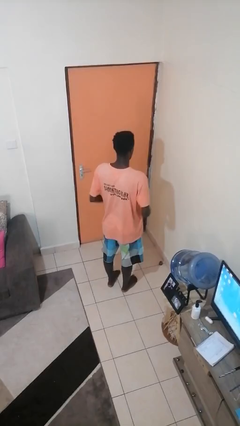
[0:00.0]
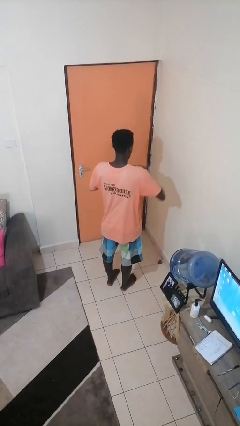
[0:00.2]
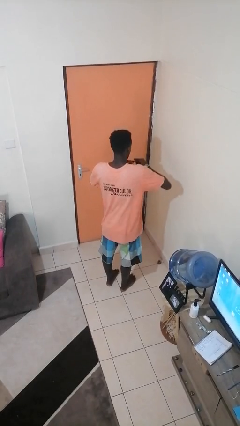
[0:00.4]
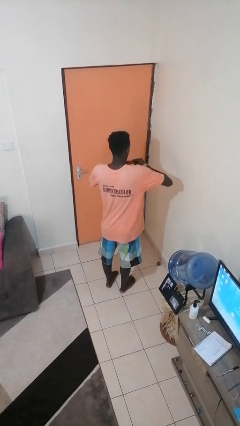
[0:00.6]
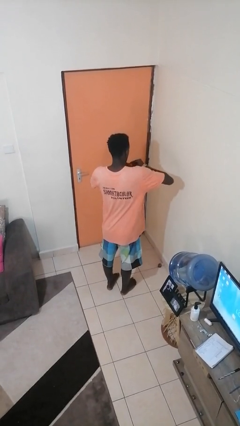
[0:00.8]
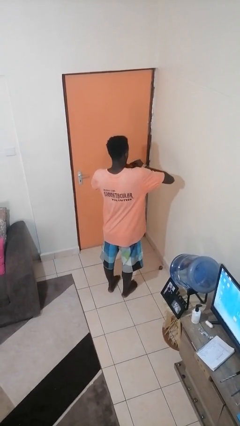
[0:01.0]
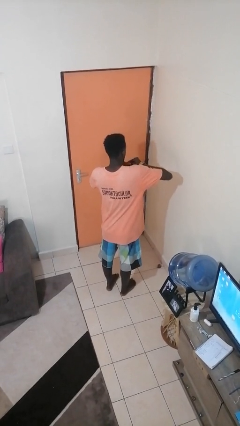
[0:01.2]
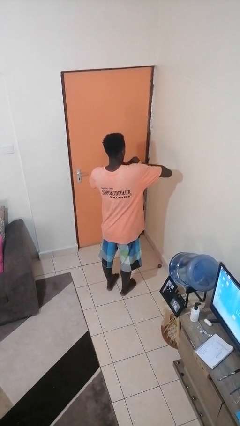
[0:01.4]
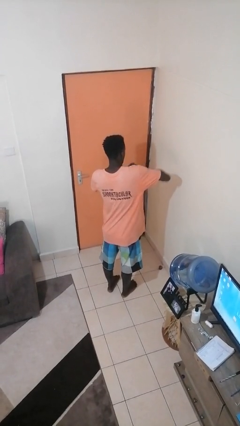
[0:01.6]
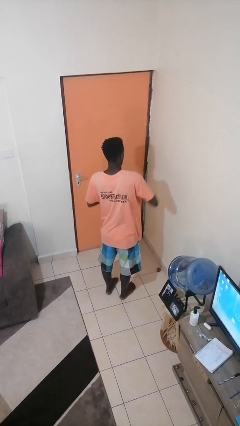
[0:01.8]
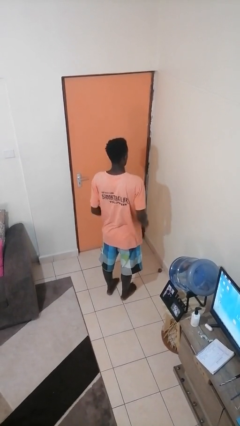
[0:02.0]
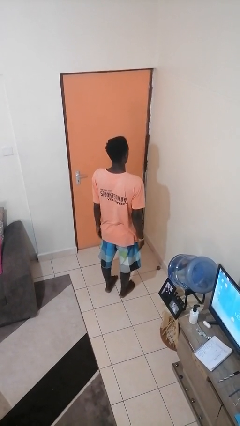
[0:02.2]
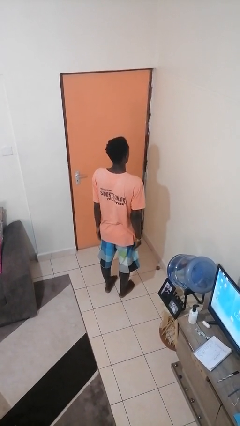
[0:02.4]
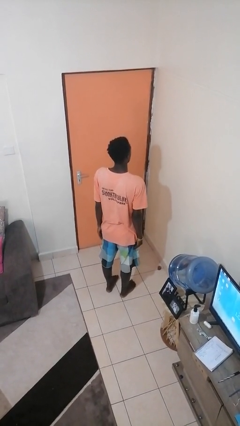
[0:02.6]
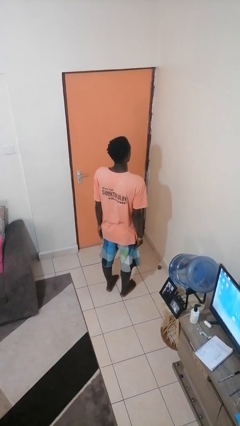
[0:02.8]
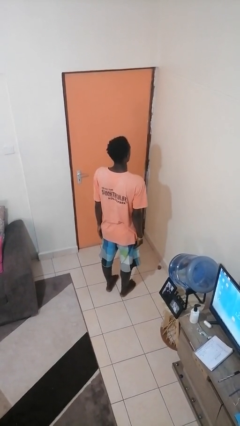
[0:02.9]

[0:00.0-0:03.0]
person puts on ring

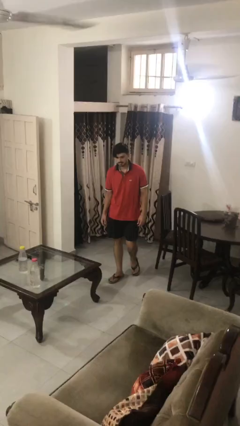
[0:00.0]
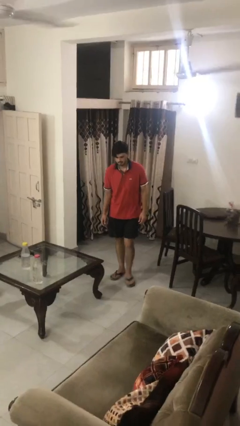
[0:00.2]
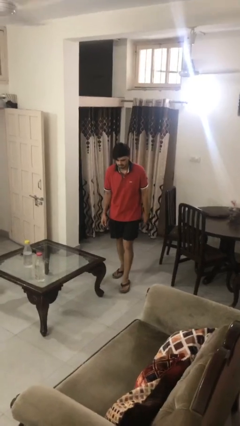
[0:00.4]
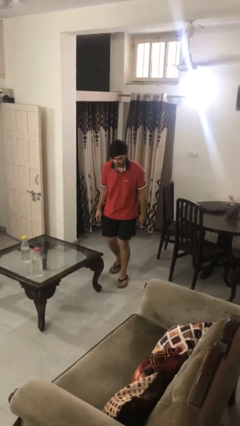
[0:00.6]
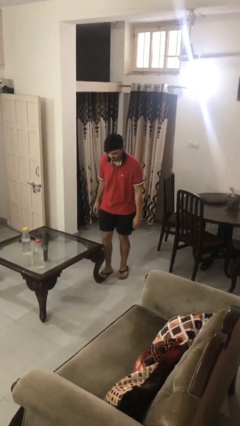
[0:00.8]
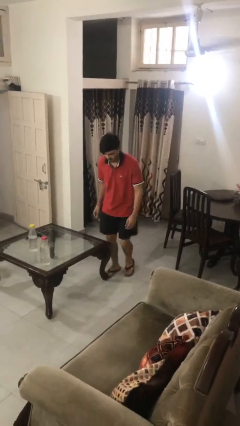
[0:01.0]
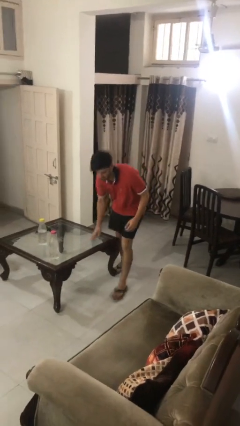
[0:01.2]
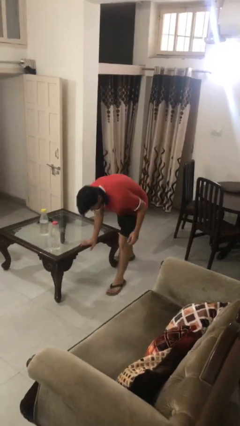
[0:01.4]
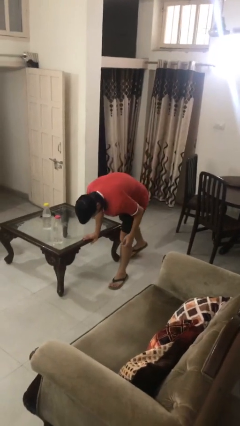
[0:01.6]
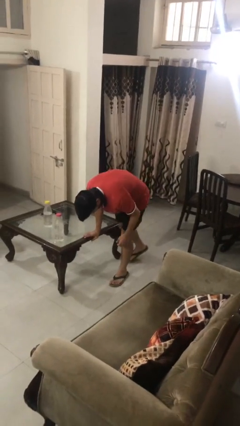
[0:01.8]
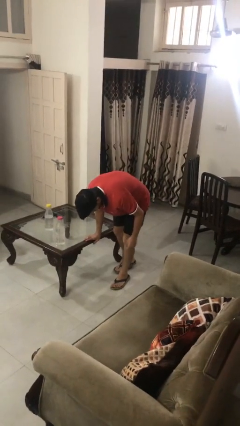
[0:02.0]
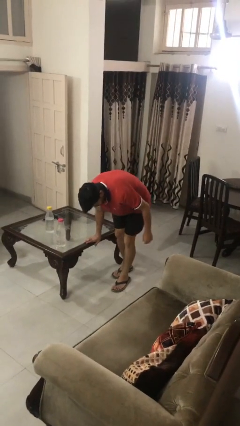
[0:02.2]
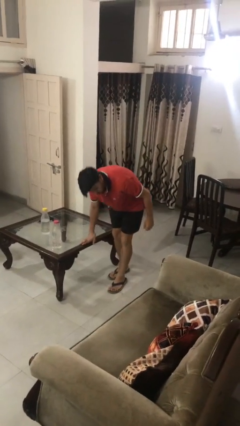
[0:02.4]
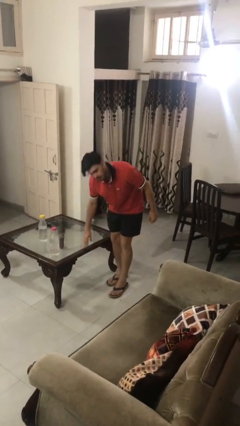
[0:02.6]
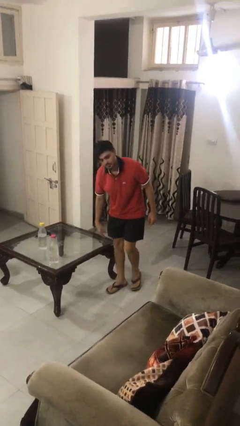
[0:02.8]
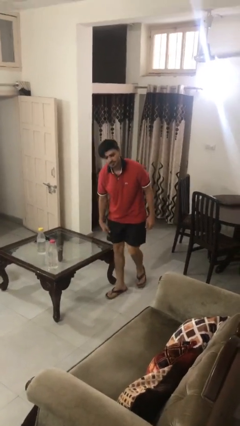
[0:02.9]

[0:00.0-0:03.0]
person bumps into table

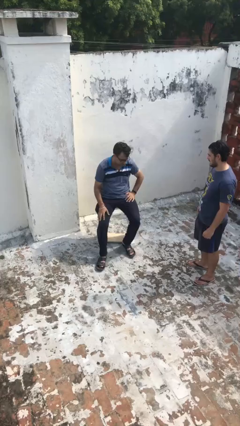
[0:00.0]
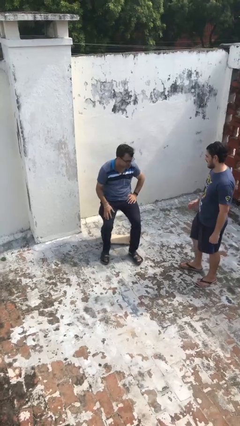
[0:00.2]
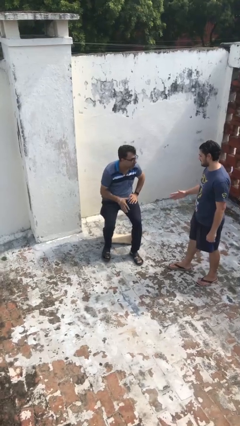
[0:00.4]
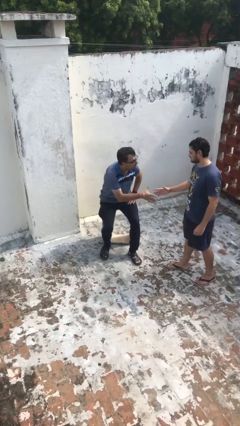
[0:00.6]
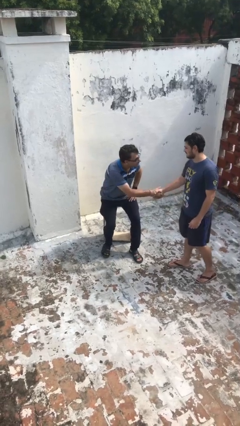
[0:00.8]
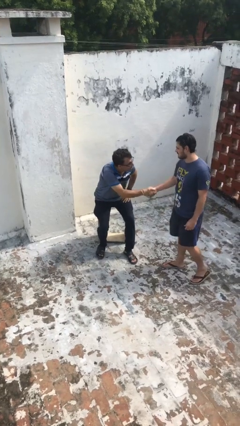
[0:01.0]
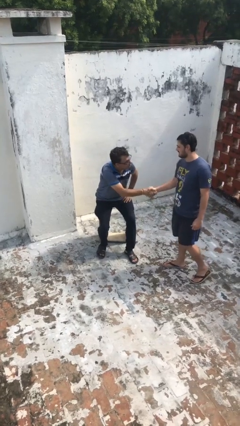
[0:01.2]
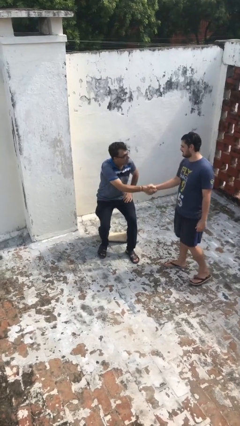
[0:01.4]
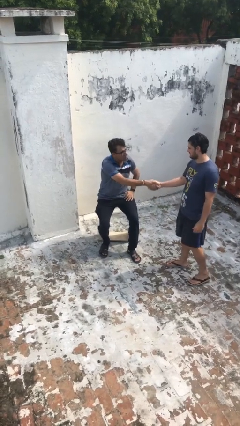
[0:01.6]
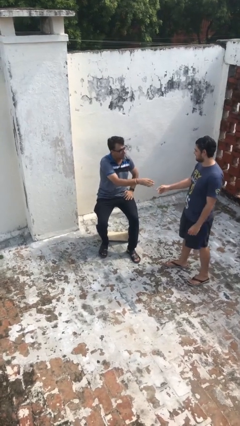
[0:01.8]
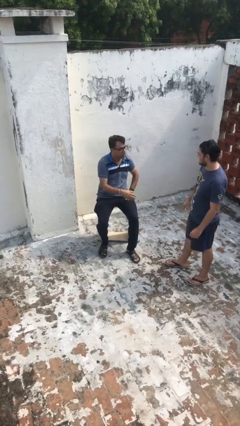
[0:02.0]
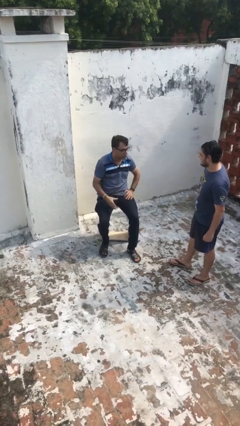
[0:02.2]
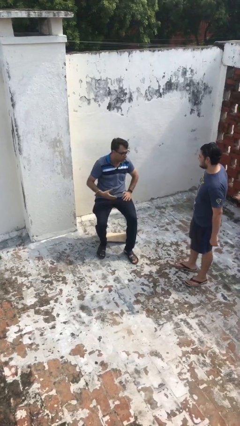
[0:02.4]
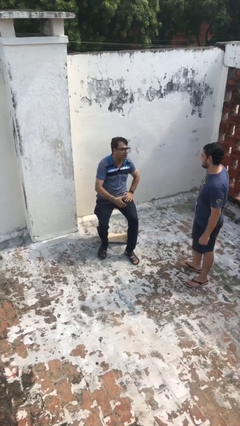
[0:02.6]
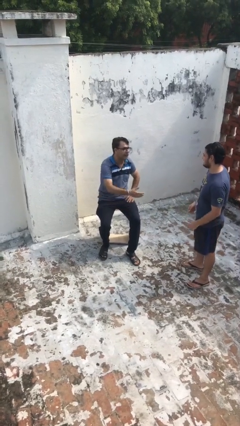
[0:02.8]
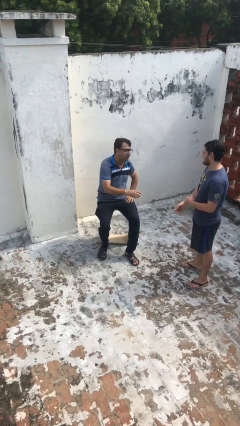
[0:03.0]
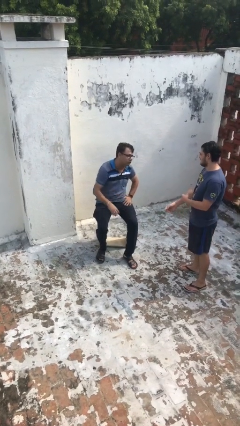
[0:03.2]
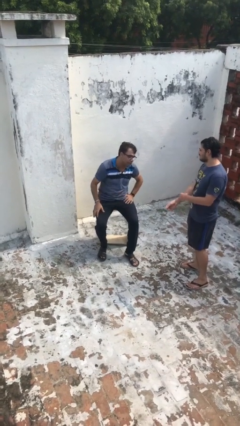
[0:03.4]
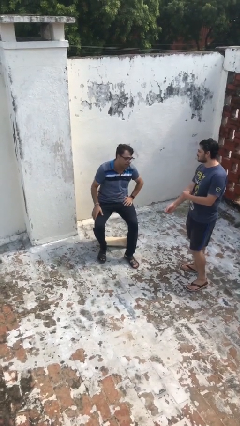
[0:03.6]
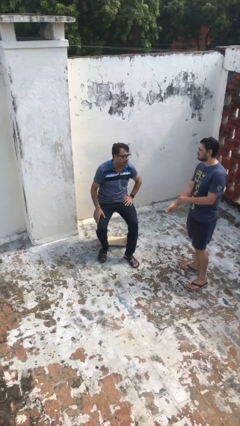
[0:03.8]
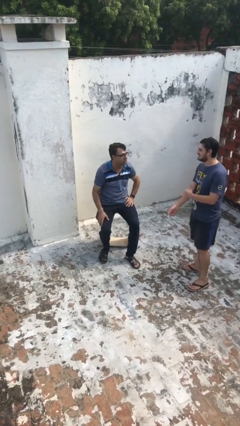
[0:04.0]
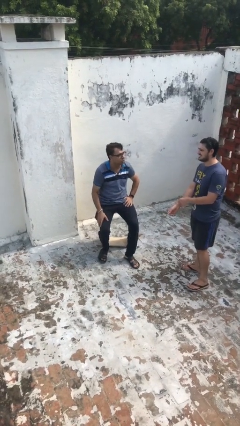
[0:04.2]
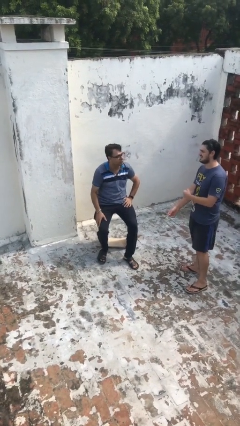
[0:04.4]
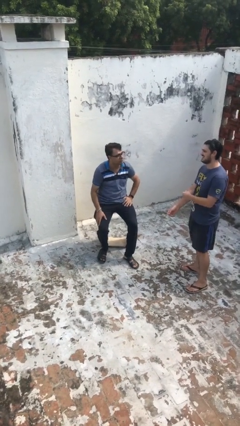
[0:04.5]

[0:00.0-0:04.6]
person shakes hand

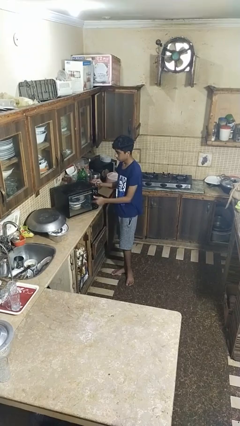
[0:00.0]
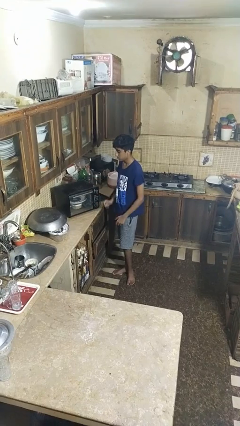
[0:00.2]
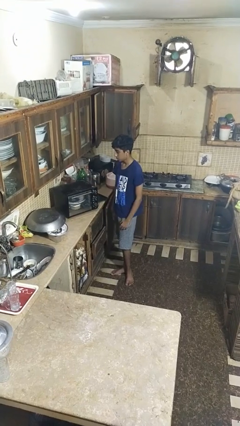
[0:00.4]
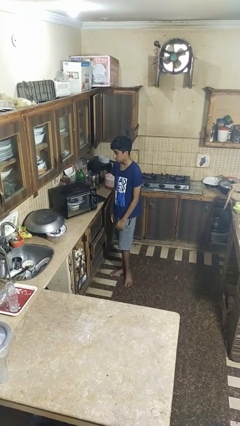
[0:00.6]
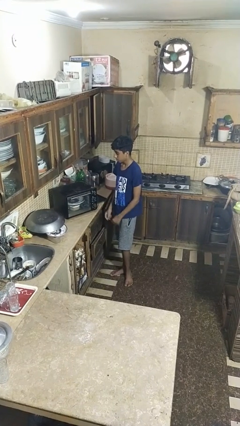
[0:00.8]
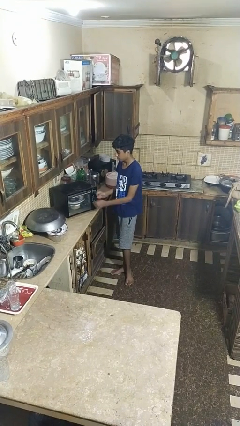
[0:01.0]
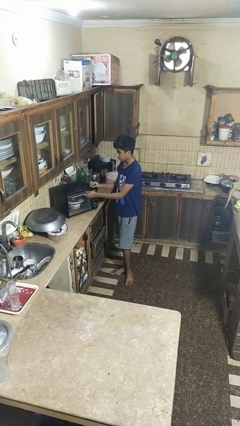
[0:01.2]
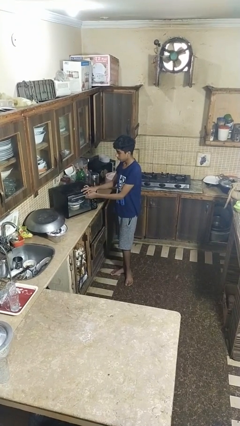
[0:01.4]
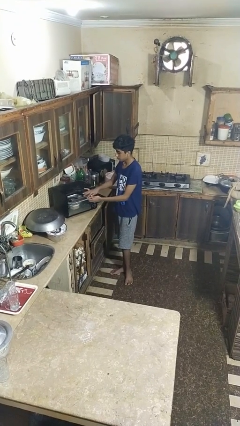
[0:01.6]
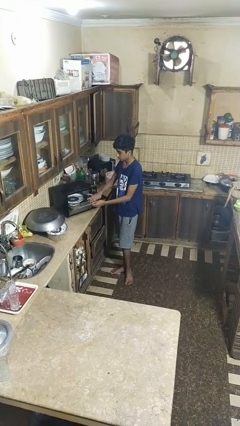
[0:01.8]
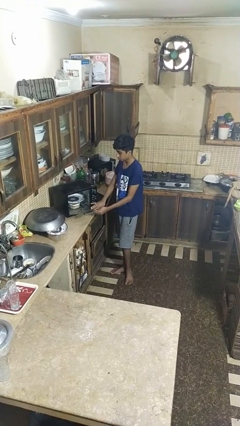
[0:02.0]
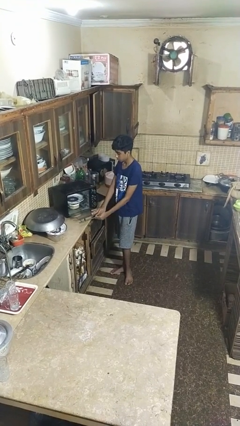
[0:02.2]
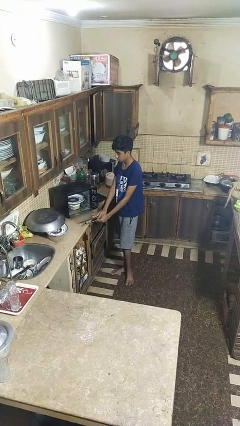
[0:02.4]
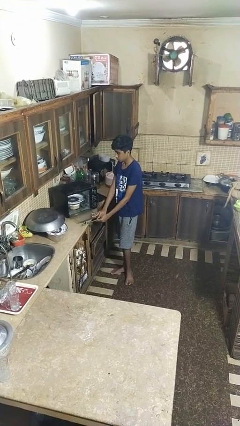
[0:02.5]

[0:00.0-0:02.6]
person opens dishwasher

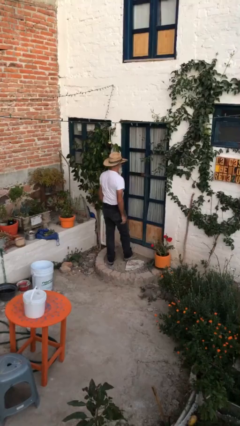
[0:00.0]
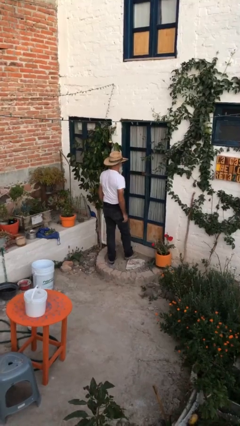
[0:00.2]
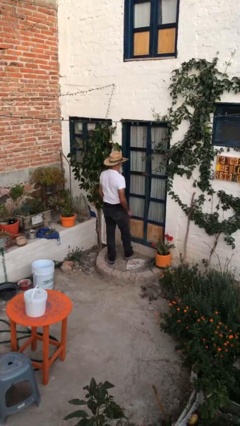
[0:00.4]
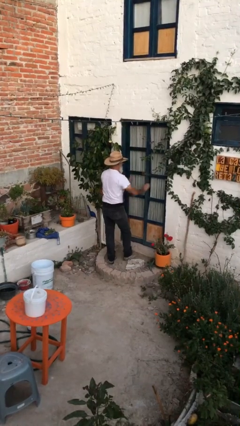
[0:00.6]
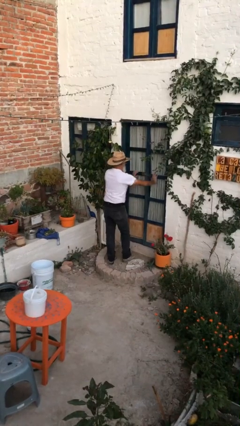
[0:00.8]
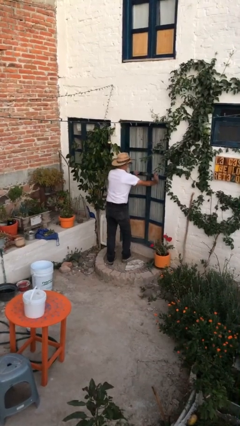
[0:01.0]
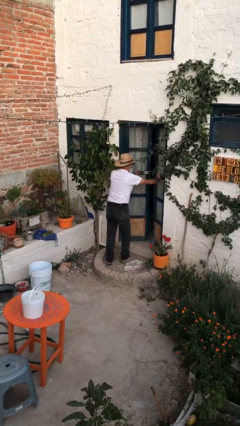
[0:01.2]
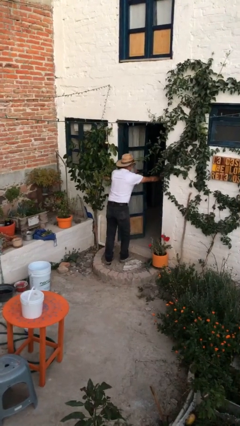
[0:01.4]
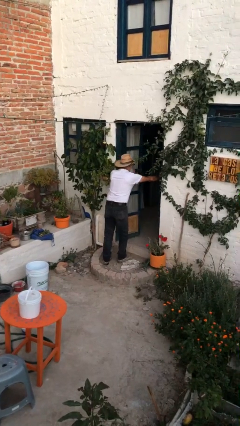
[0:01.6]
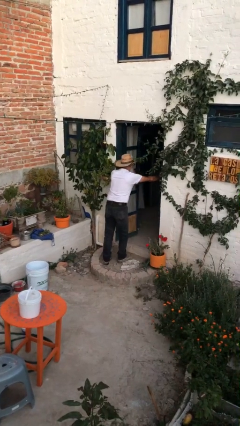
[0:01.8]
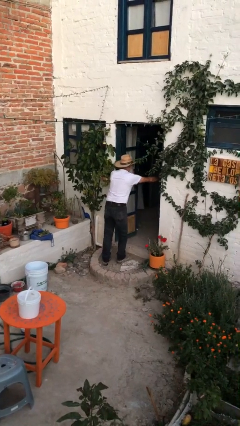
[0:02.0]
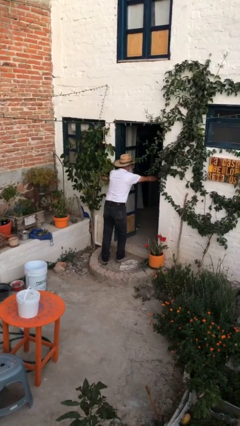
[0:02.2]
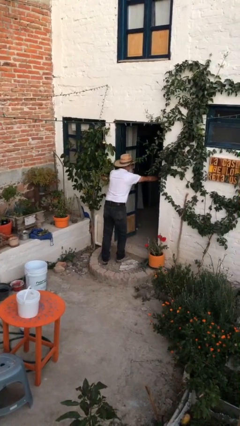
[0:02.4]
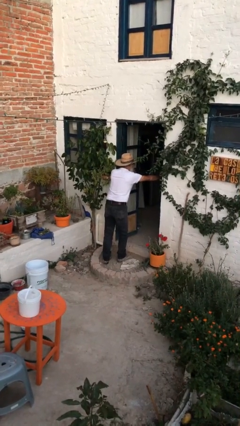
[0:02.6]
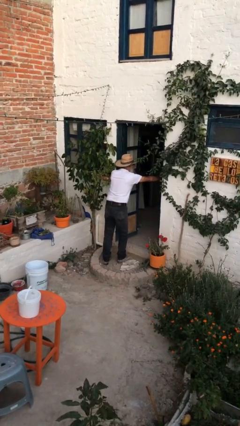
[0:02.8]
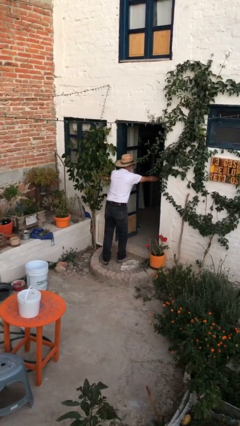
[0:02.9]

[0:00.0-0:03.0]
person opens facility door

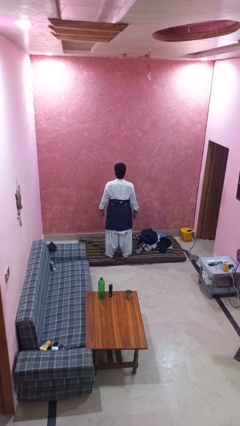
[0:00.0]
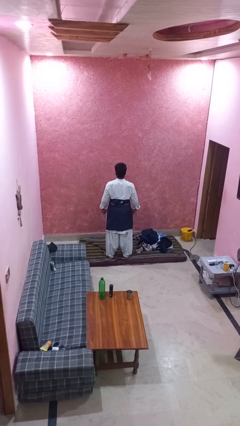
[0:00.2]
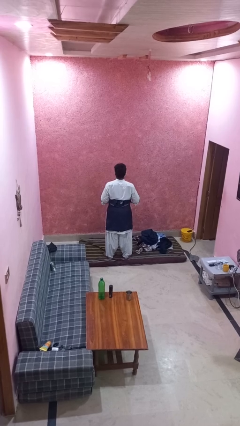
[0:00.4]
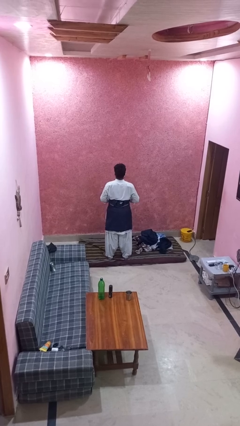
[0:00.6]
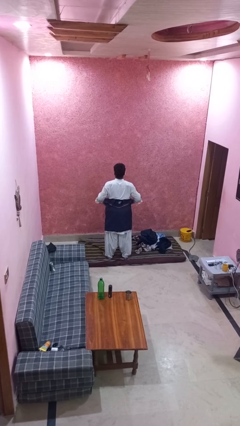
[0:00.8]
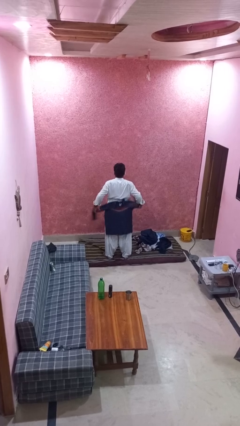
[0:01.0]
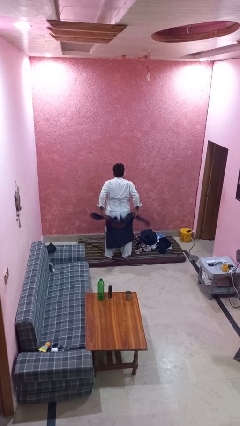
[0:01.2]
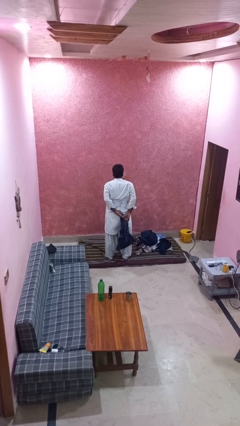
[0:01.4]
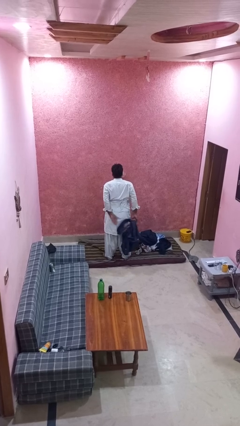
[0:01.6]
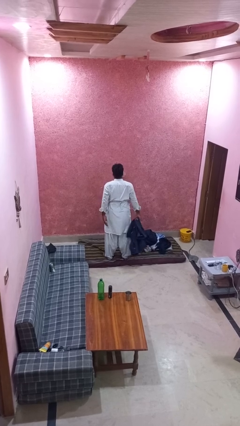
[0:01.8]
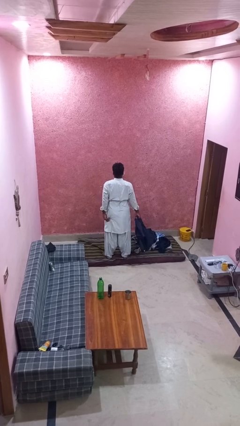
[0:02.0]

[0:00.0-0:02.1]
person unties jacket around waist
